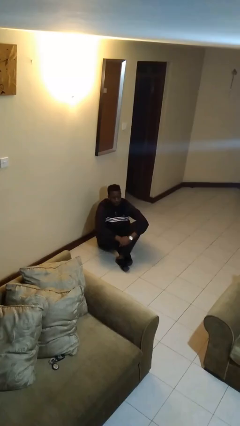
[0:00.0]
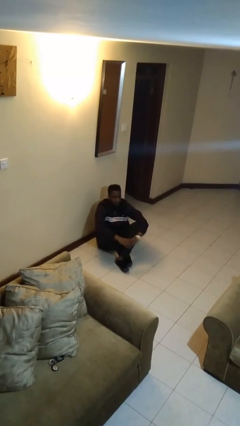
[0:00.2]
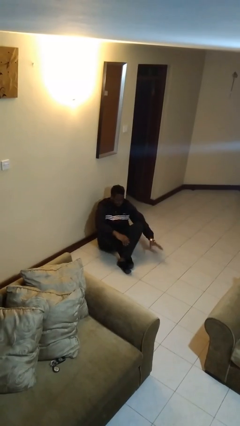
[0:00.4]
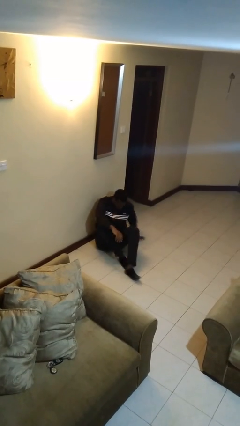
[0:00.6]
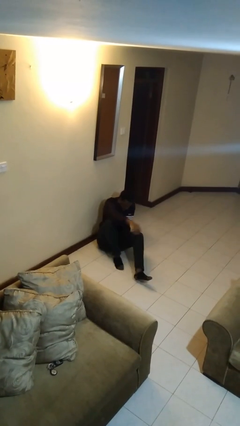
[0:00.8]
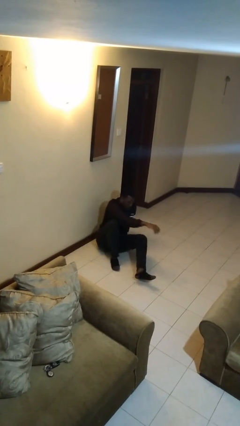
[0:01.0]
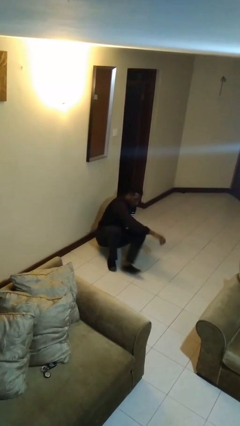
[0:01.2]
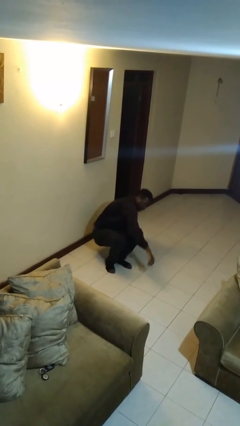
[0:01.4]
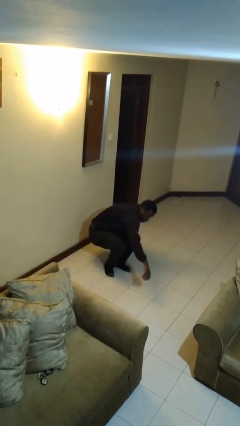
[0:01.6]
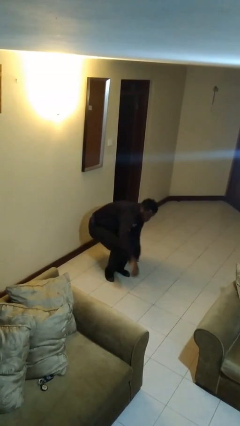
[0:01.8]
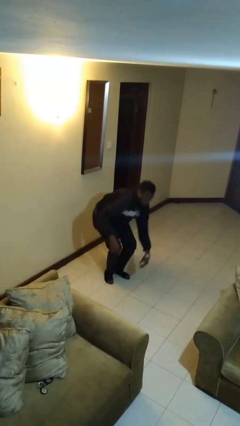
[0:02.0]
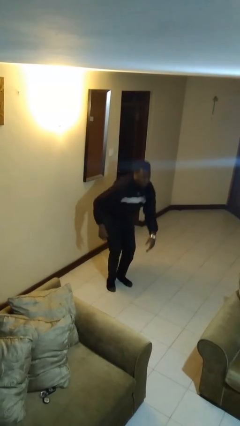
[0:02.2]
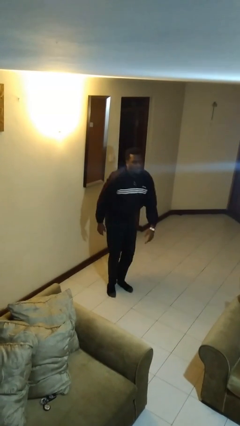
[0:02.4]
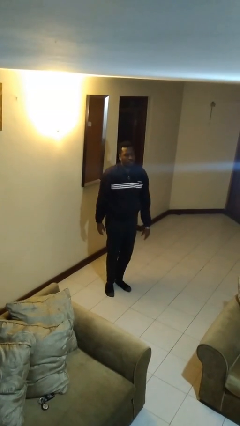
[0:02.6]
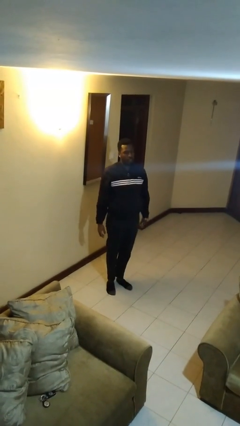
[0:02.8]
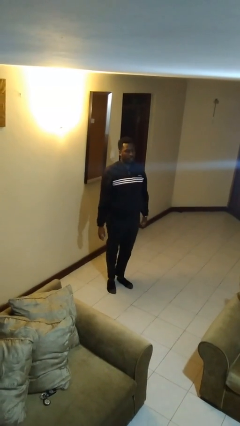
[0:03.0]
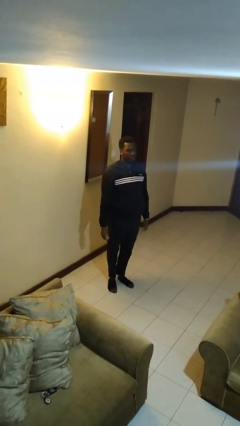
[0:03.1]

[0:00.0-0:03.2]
person stands up from floor

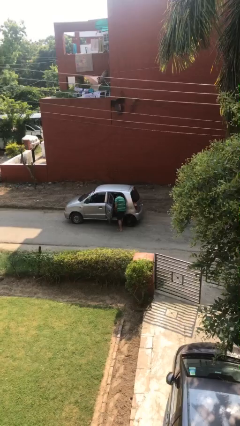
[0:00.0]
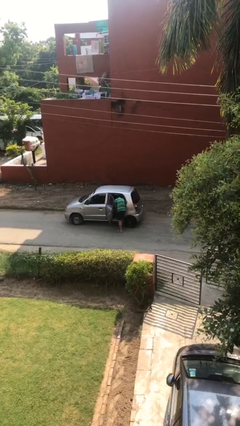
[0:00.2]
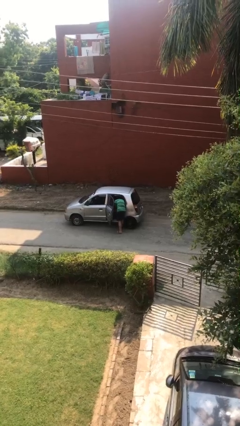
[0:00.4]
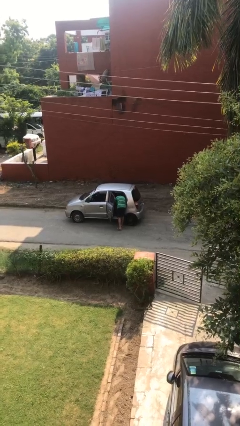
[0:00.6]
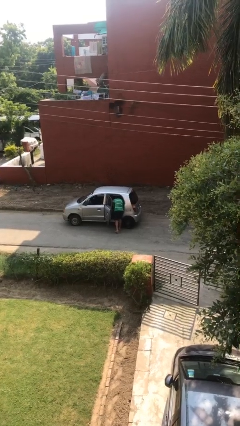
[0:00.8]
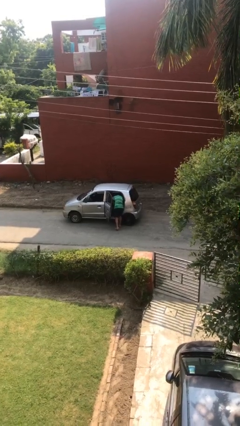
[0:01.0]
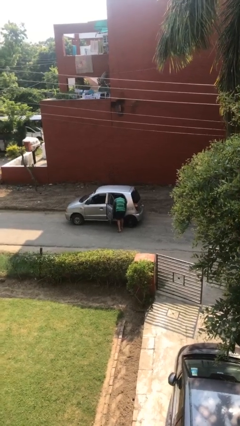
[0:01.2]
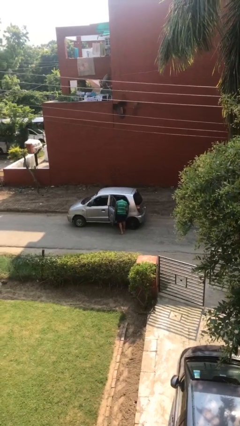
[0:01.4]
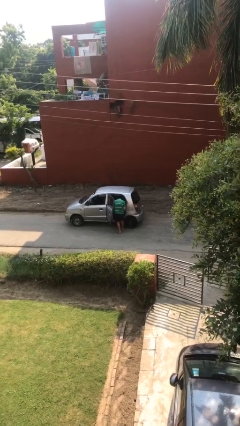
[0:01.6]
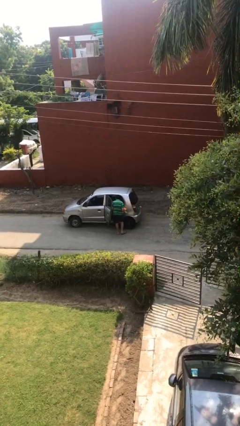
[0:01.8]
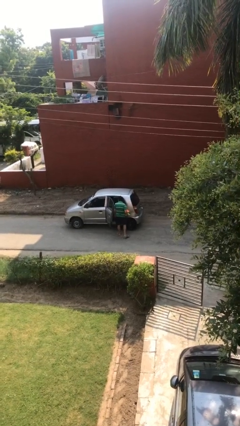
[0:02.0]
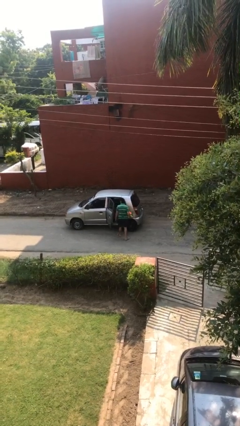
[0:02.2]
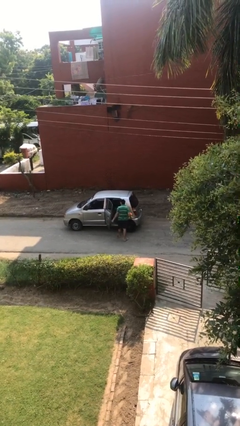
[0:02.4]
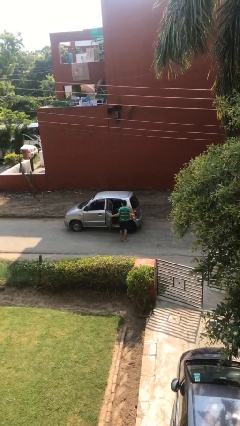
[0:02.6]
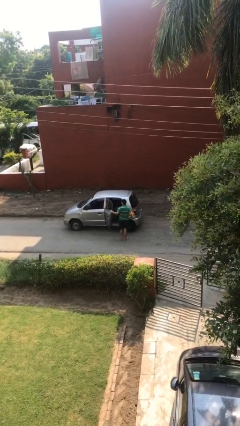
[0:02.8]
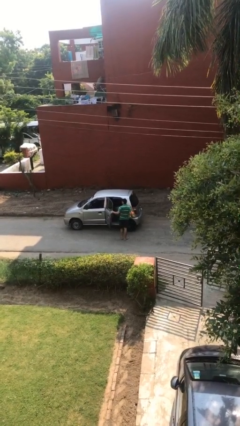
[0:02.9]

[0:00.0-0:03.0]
person unloads car

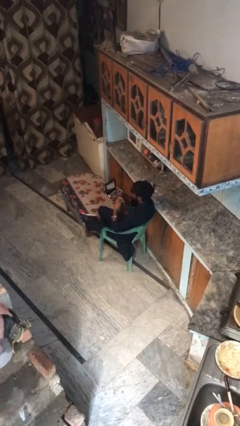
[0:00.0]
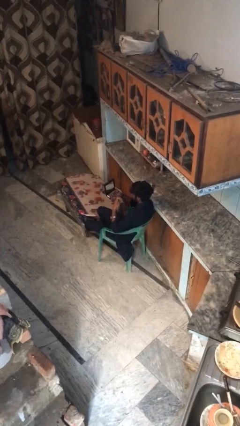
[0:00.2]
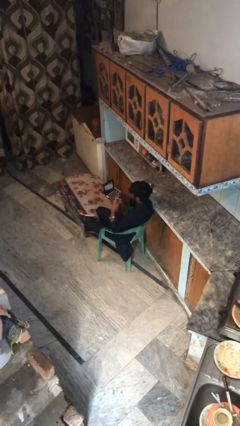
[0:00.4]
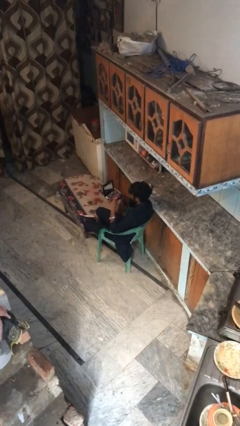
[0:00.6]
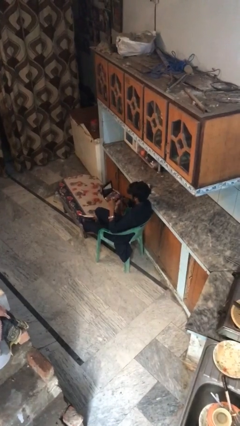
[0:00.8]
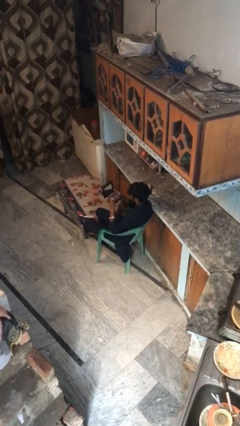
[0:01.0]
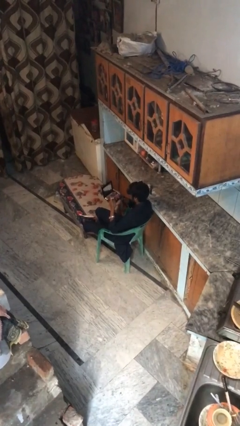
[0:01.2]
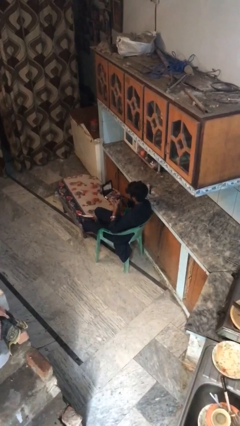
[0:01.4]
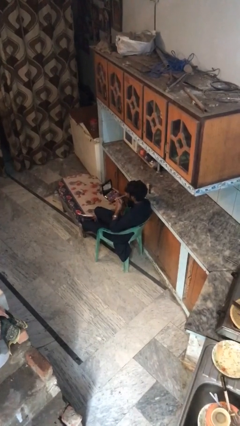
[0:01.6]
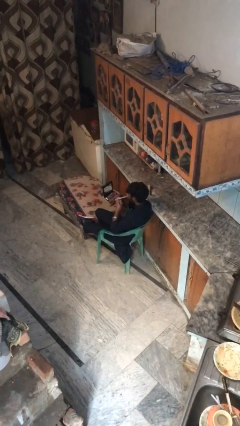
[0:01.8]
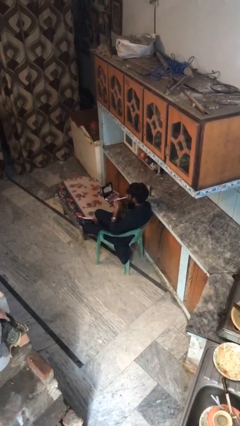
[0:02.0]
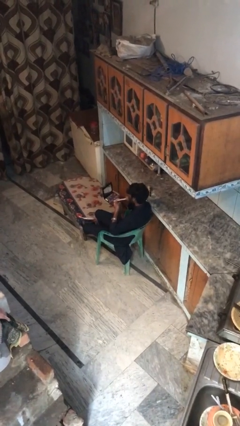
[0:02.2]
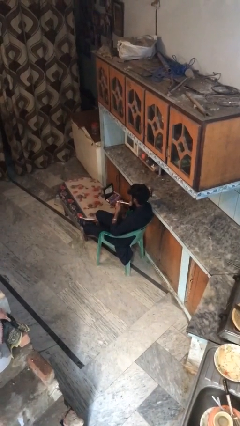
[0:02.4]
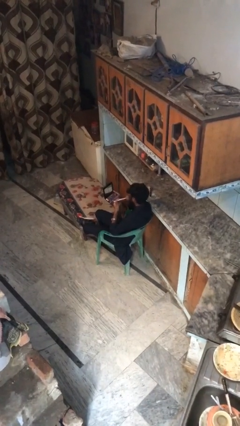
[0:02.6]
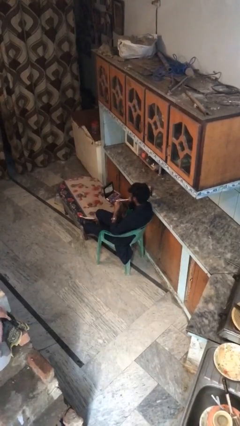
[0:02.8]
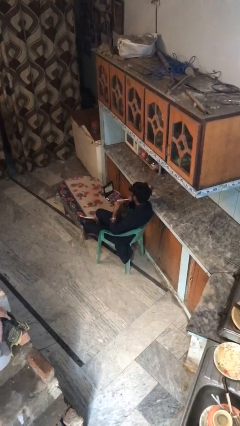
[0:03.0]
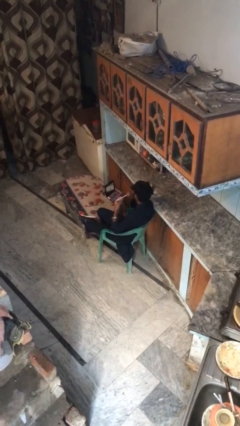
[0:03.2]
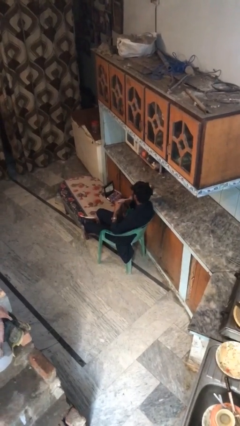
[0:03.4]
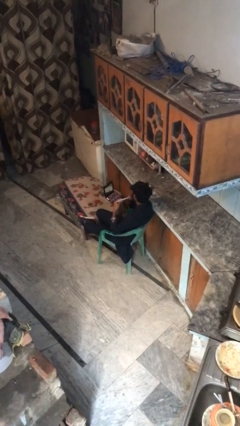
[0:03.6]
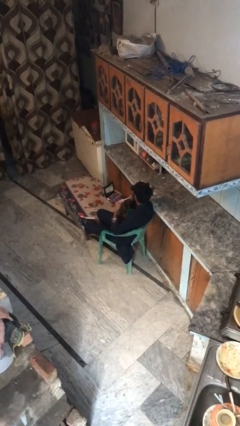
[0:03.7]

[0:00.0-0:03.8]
person applies foundation makeup

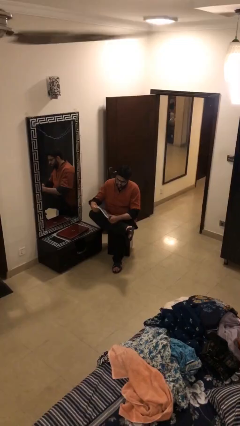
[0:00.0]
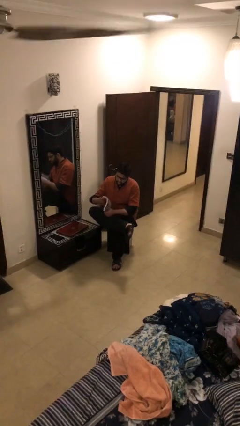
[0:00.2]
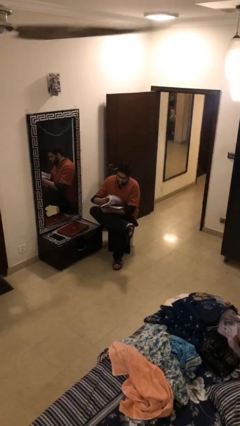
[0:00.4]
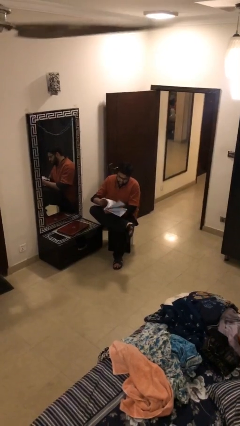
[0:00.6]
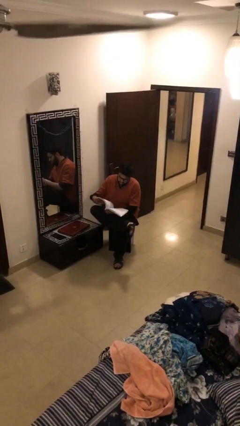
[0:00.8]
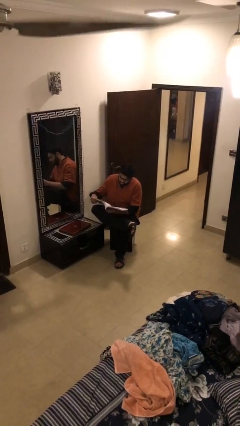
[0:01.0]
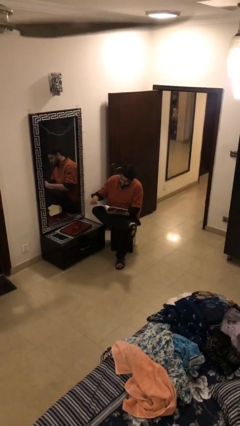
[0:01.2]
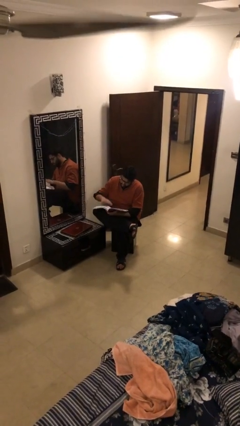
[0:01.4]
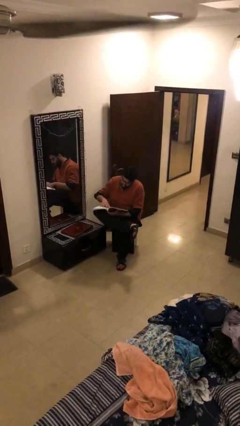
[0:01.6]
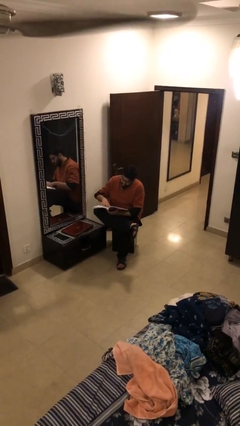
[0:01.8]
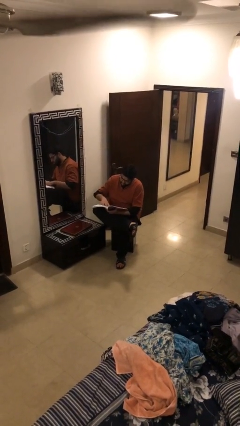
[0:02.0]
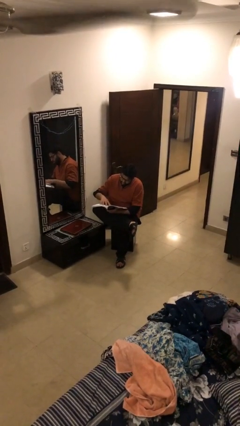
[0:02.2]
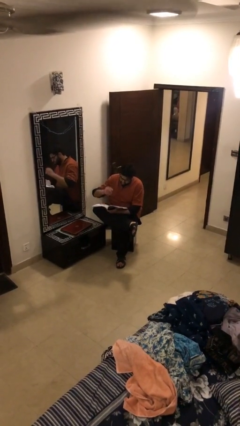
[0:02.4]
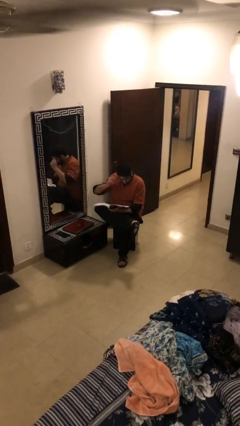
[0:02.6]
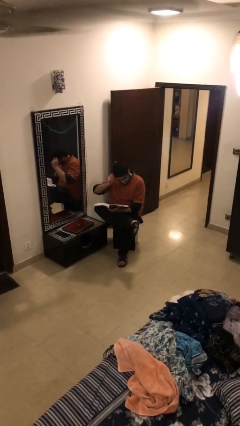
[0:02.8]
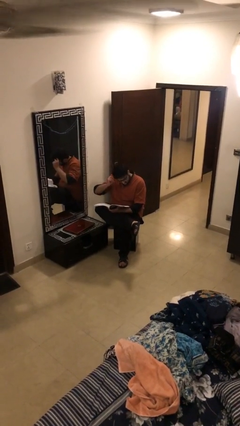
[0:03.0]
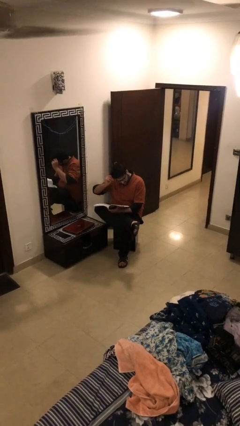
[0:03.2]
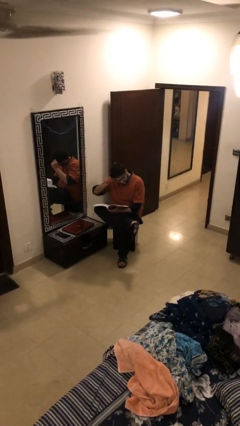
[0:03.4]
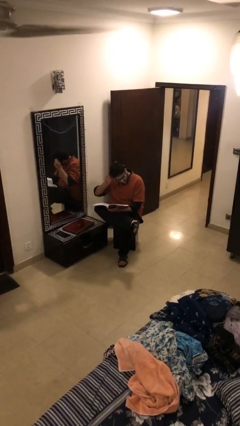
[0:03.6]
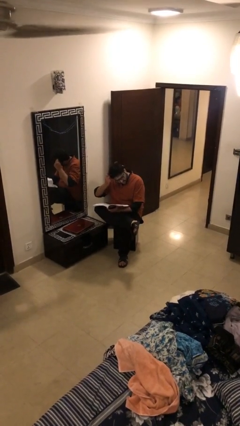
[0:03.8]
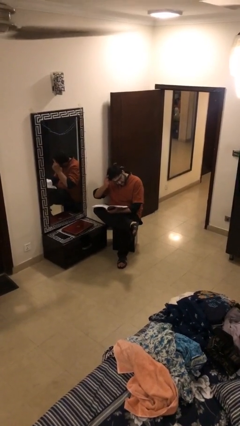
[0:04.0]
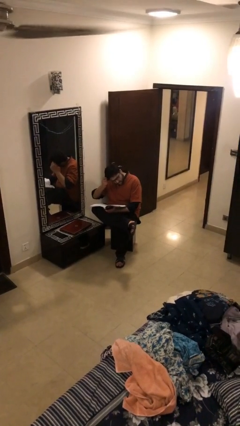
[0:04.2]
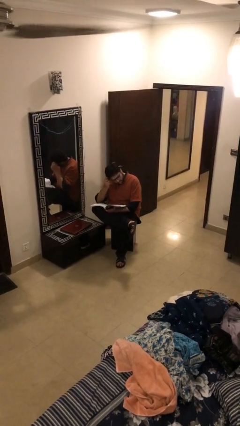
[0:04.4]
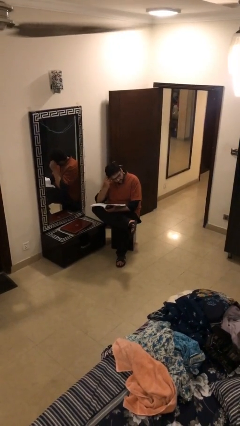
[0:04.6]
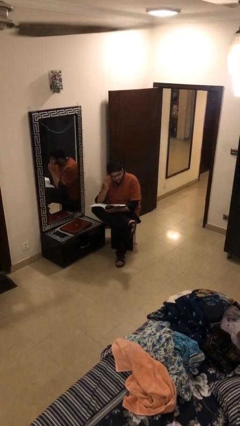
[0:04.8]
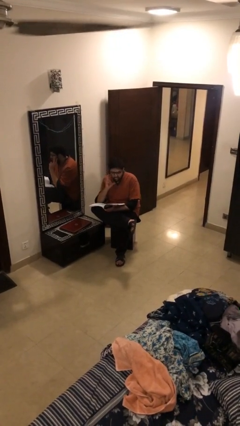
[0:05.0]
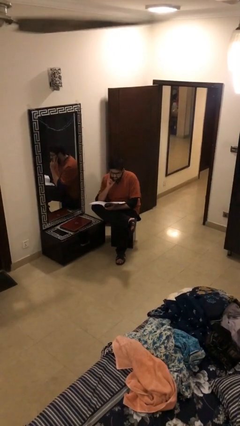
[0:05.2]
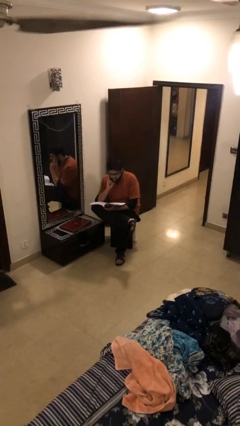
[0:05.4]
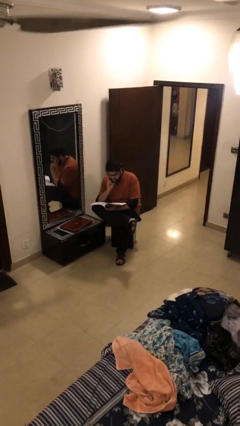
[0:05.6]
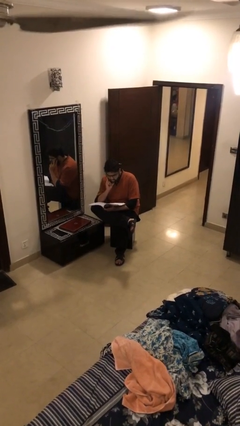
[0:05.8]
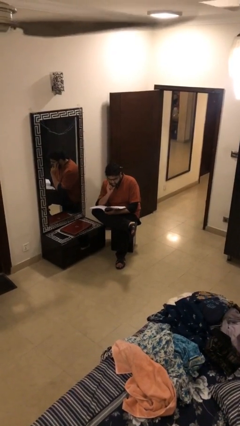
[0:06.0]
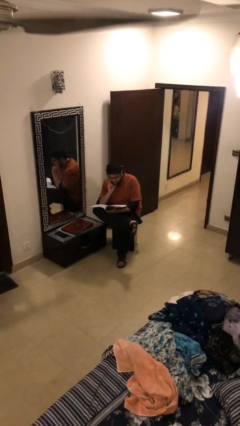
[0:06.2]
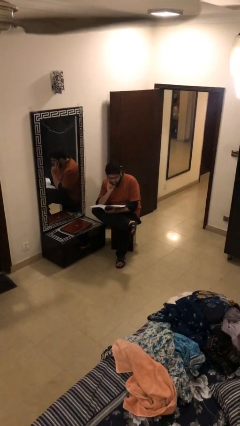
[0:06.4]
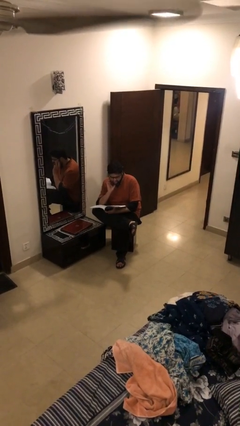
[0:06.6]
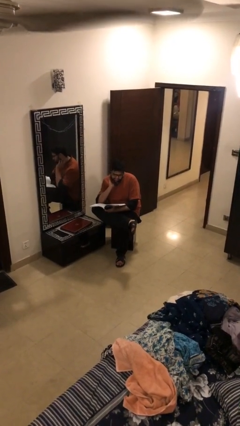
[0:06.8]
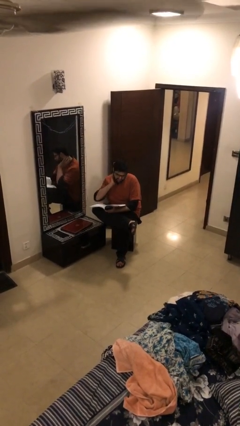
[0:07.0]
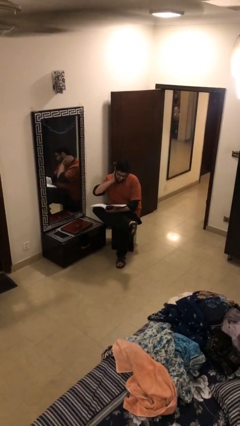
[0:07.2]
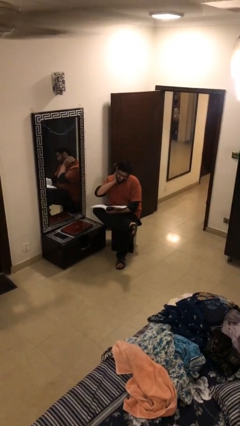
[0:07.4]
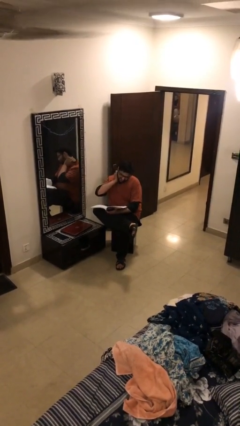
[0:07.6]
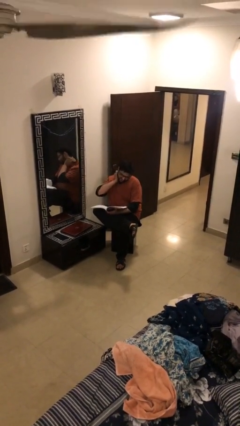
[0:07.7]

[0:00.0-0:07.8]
person reads document
